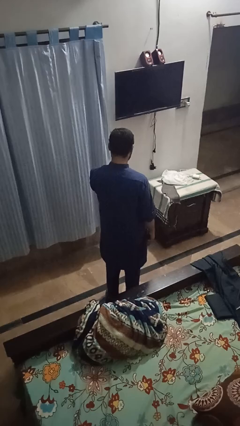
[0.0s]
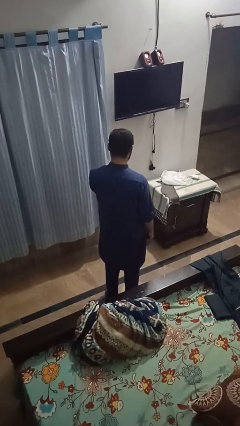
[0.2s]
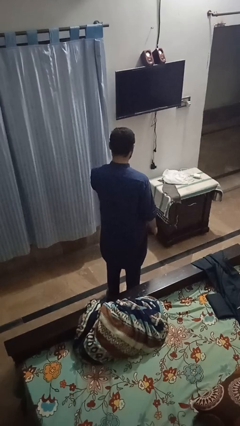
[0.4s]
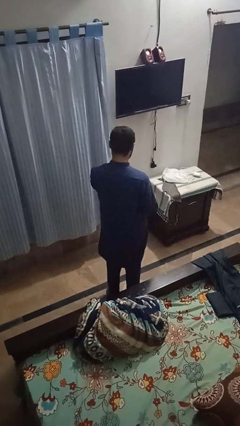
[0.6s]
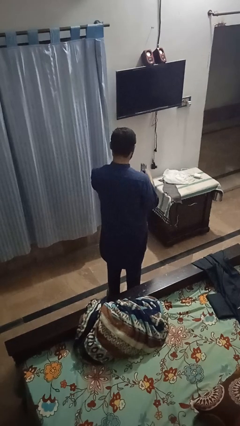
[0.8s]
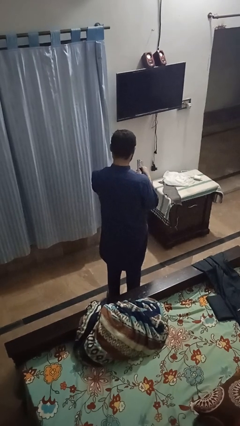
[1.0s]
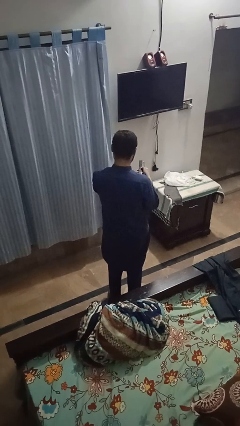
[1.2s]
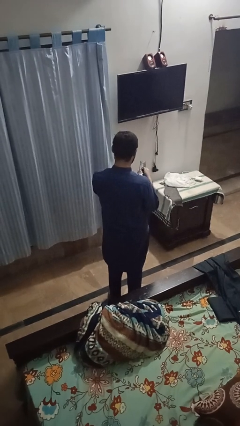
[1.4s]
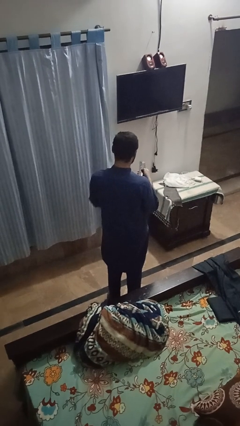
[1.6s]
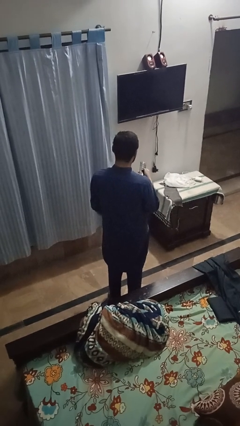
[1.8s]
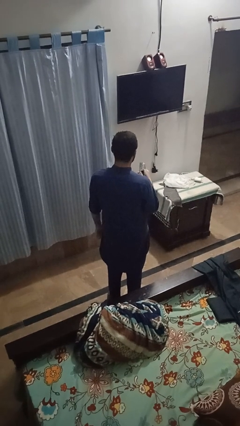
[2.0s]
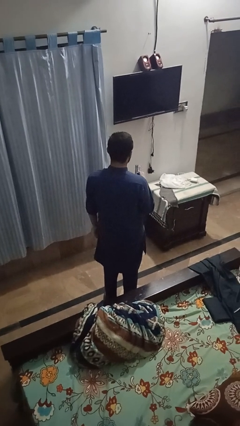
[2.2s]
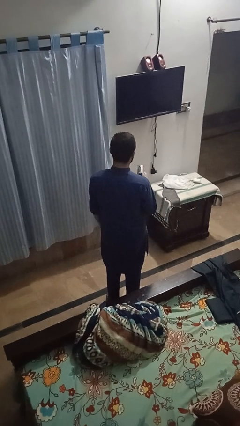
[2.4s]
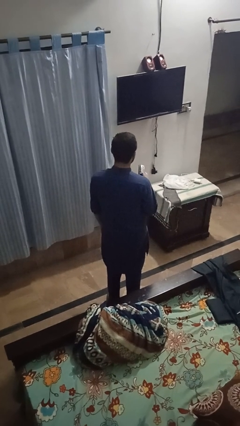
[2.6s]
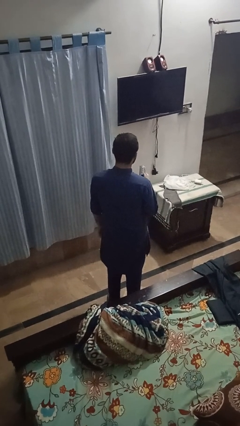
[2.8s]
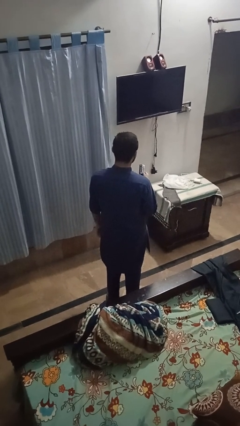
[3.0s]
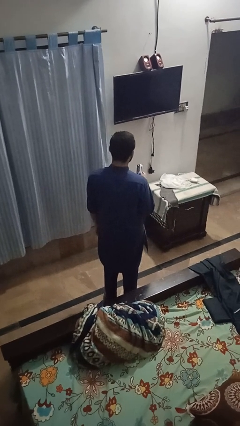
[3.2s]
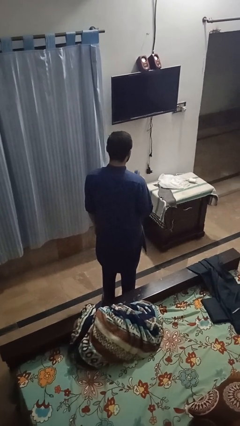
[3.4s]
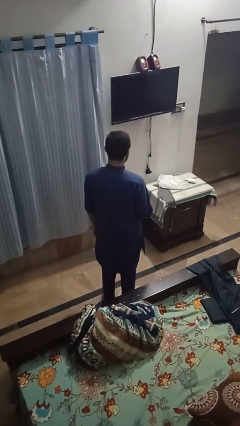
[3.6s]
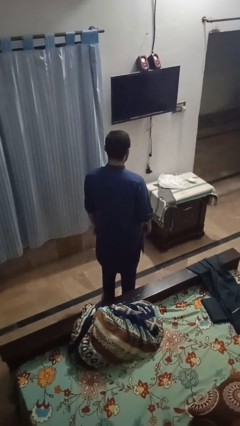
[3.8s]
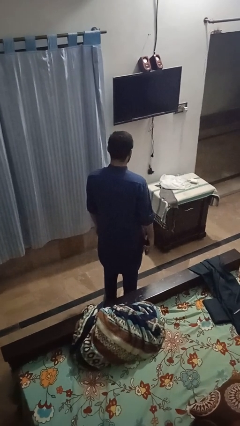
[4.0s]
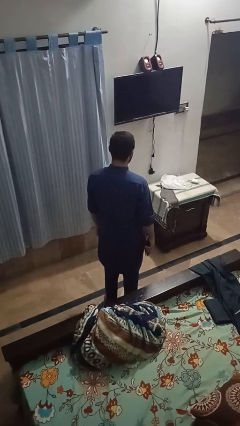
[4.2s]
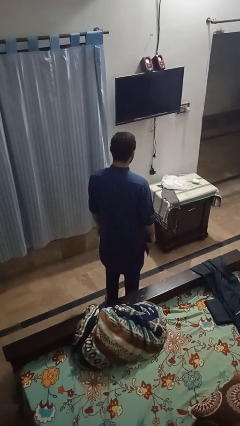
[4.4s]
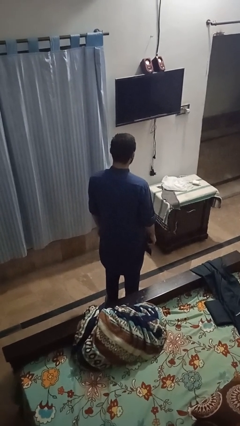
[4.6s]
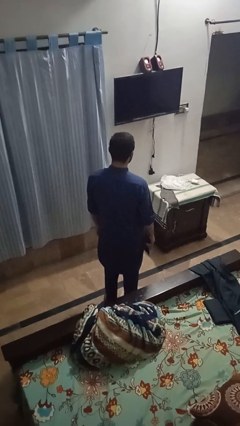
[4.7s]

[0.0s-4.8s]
person uses television remote

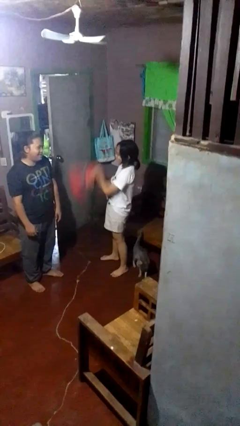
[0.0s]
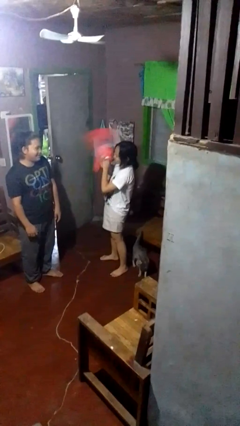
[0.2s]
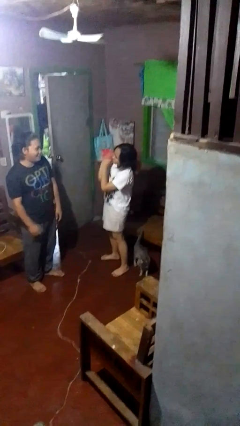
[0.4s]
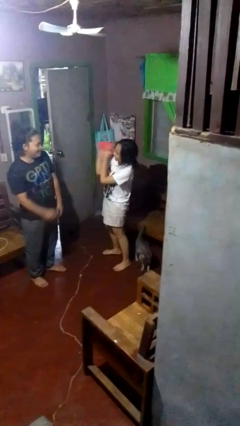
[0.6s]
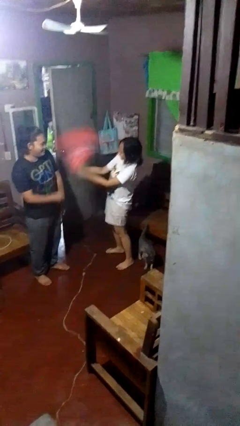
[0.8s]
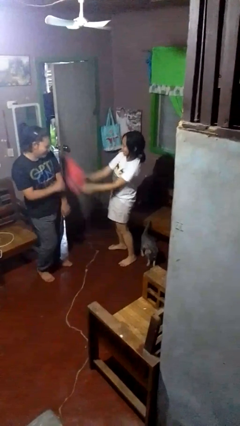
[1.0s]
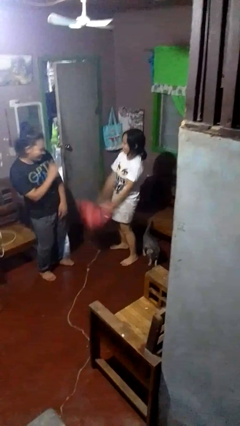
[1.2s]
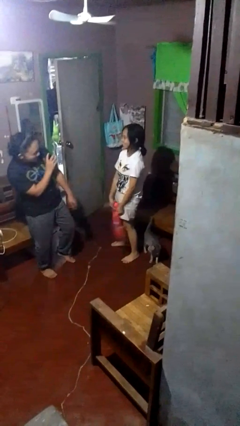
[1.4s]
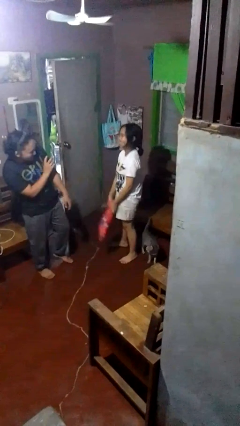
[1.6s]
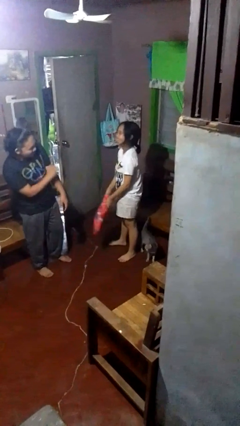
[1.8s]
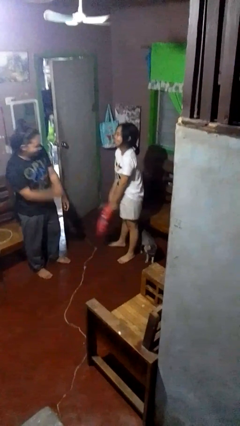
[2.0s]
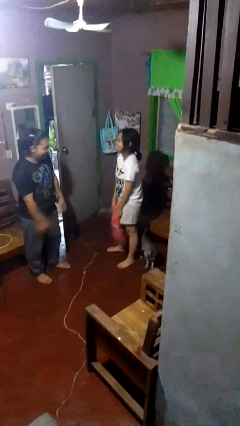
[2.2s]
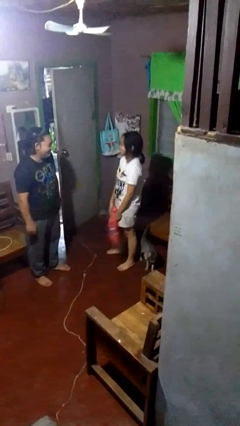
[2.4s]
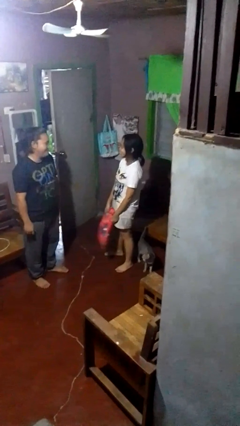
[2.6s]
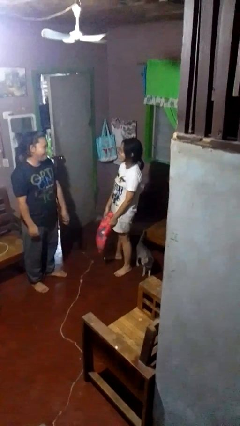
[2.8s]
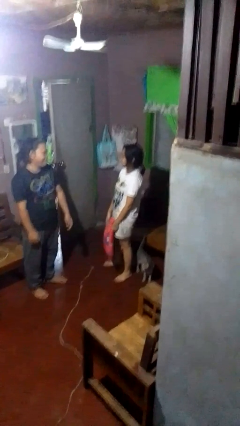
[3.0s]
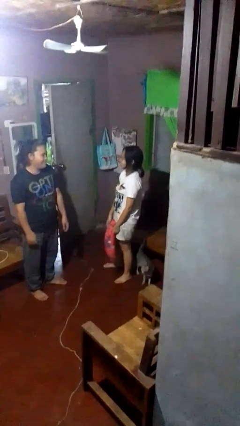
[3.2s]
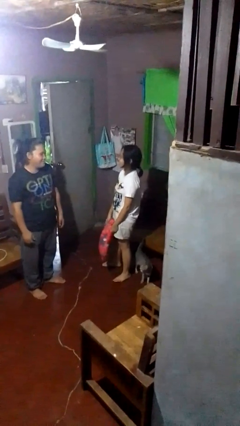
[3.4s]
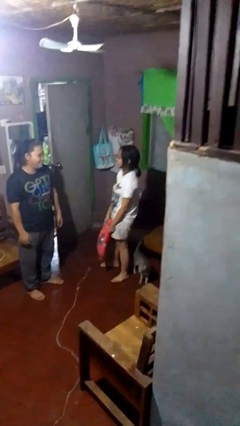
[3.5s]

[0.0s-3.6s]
person hits person with pillow

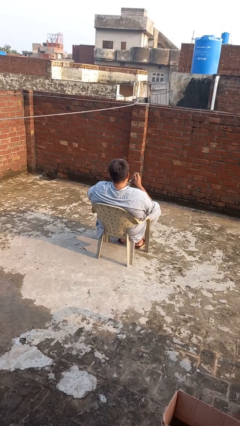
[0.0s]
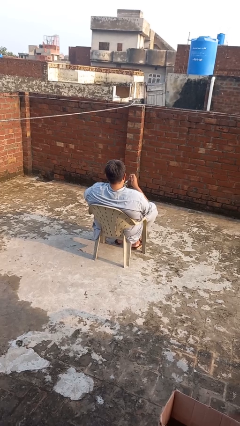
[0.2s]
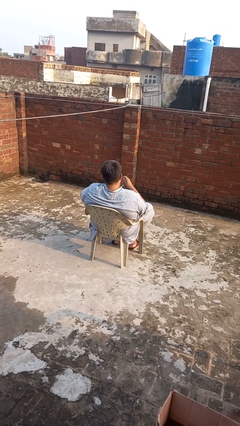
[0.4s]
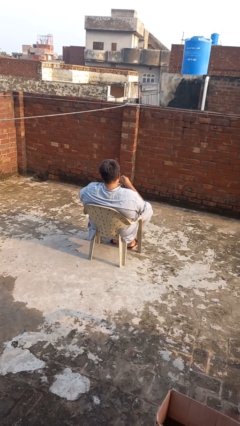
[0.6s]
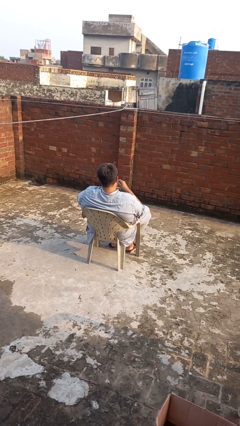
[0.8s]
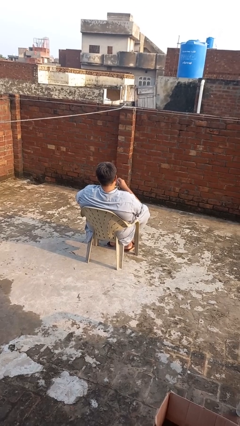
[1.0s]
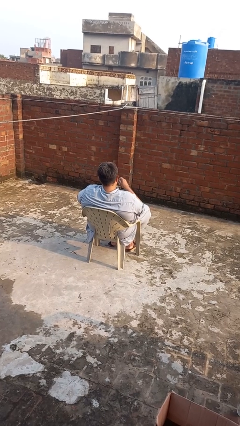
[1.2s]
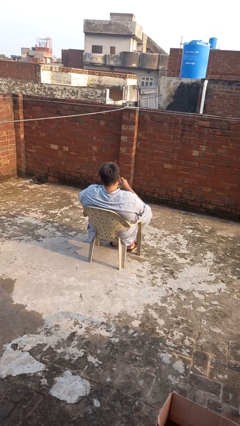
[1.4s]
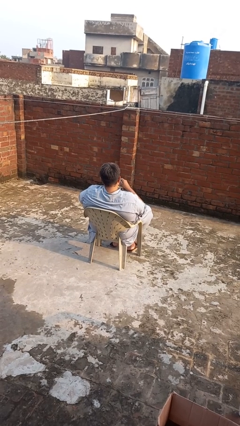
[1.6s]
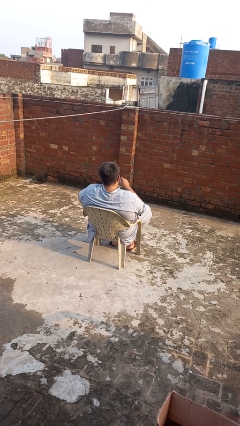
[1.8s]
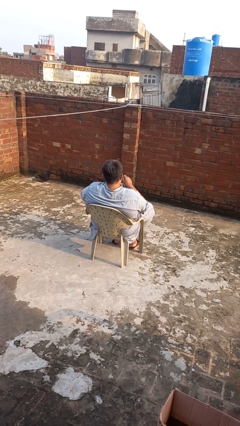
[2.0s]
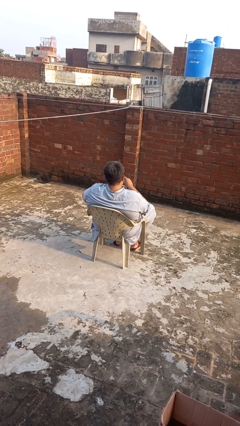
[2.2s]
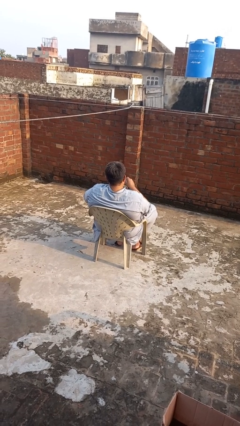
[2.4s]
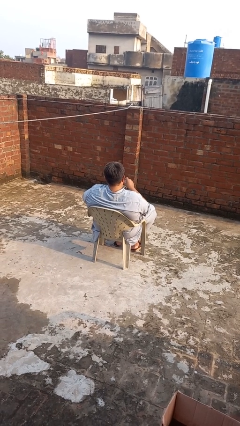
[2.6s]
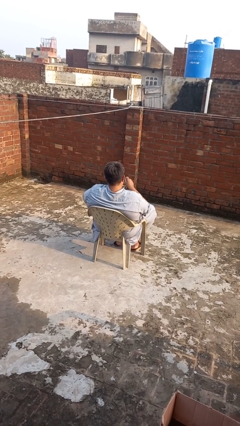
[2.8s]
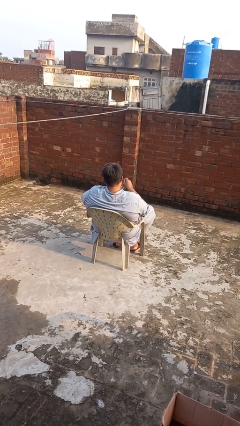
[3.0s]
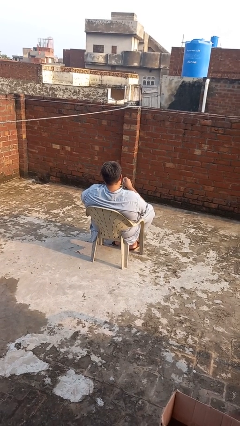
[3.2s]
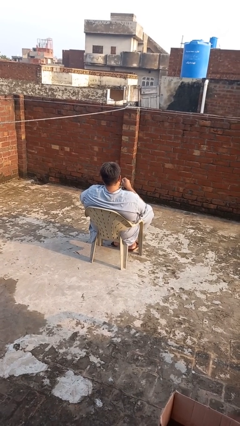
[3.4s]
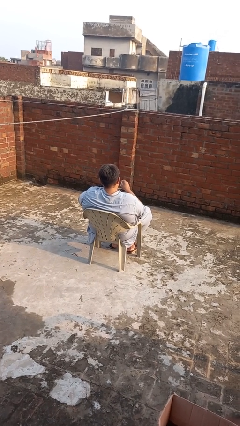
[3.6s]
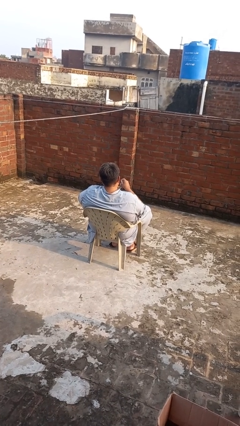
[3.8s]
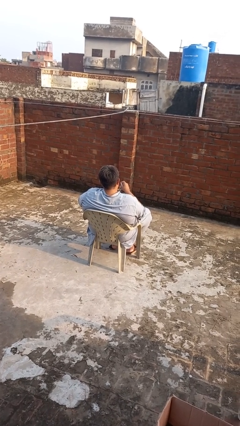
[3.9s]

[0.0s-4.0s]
person stirs mug

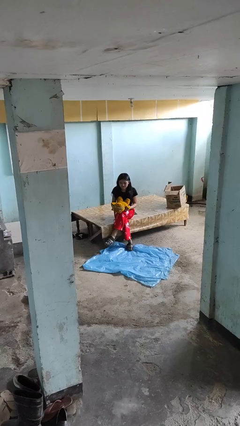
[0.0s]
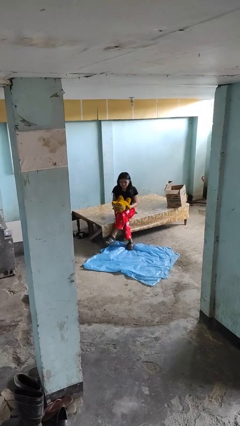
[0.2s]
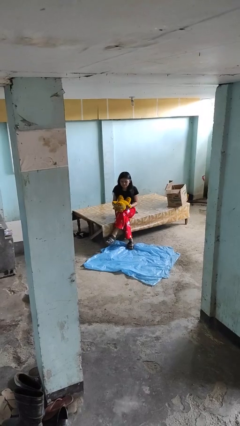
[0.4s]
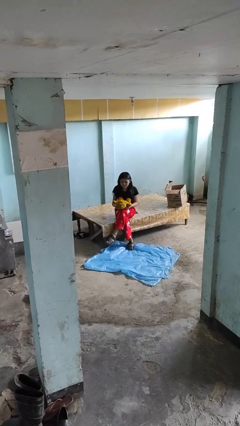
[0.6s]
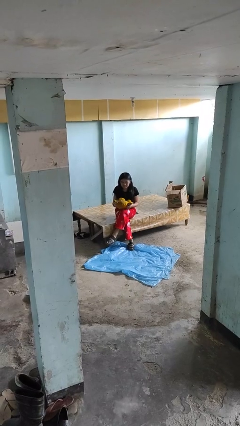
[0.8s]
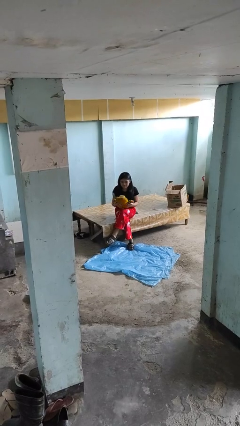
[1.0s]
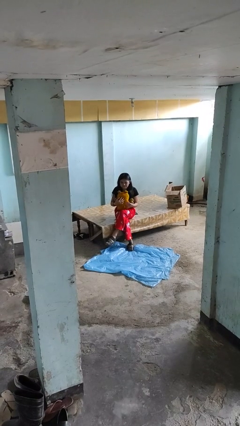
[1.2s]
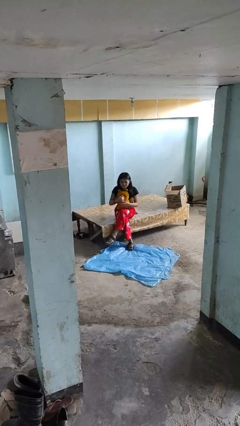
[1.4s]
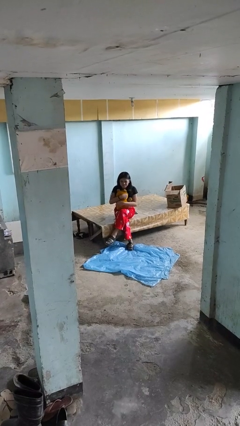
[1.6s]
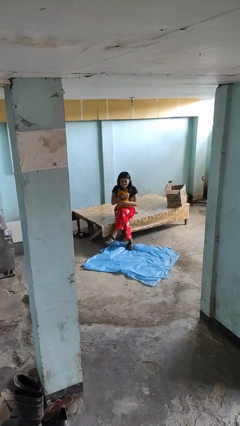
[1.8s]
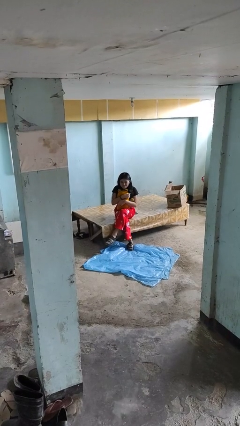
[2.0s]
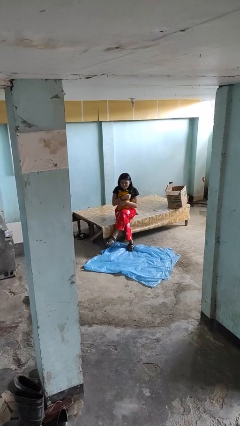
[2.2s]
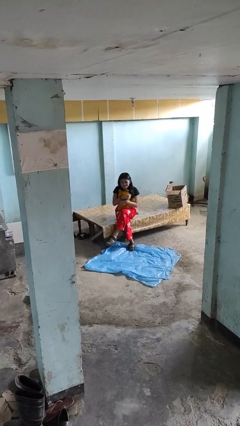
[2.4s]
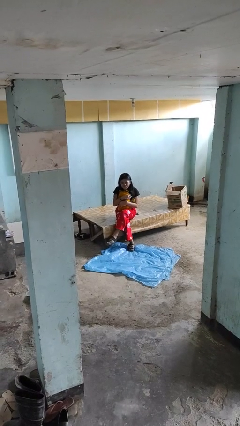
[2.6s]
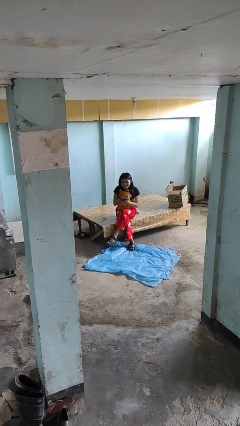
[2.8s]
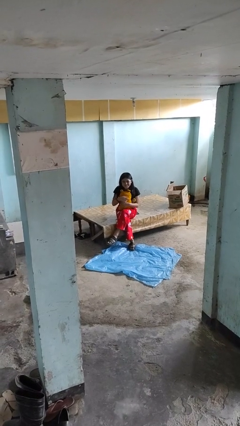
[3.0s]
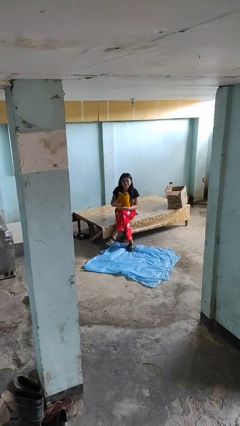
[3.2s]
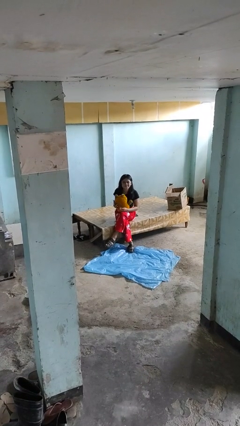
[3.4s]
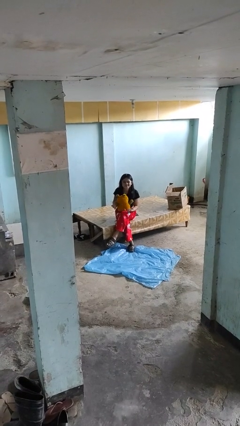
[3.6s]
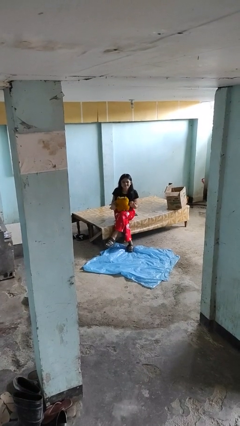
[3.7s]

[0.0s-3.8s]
person hugs stuffed animal

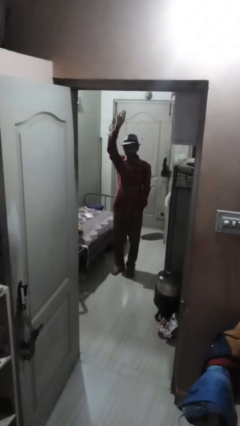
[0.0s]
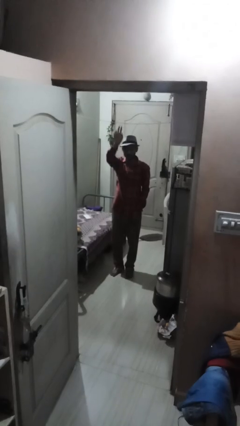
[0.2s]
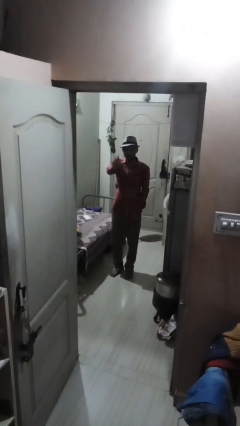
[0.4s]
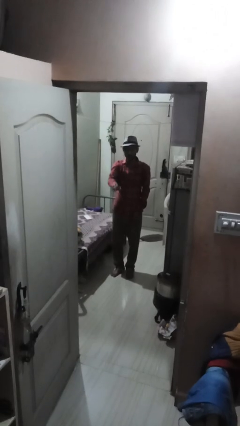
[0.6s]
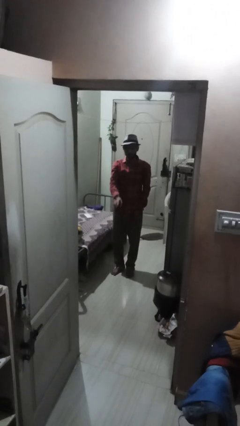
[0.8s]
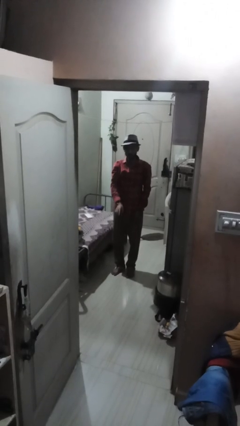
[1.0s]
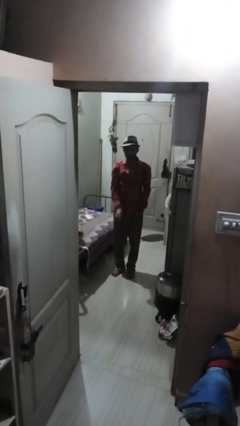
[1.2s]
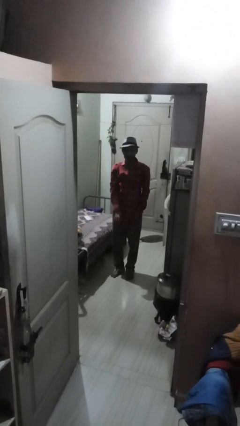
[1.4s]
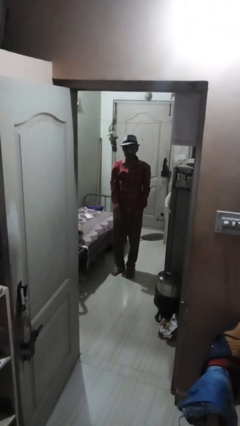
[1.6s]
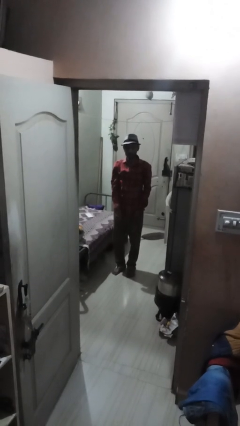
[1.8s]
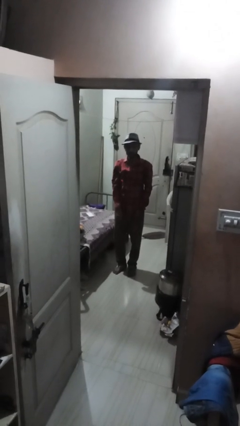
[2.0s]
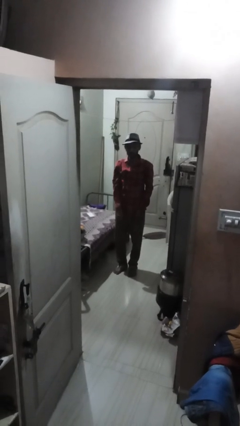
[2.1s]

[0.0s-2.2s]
person gestures swipe down
